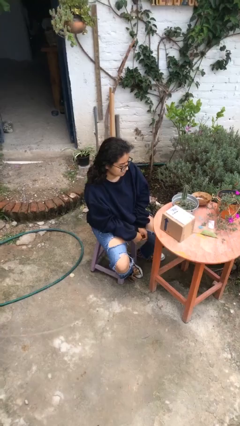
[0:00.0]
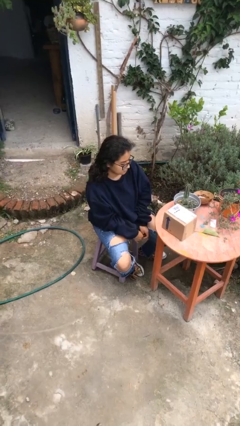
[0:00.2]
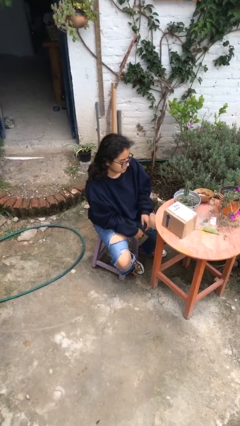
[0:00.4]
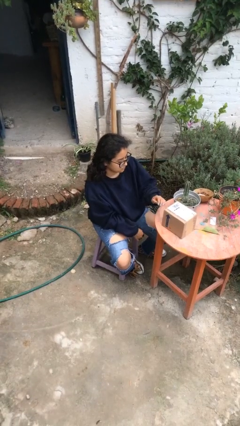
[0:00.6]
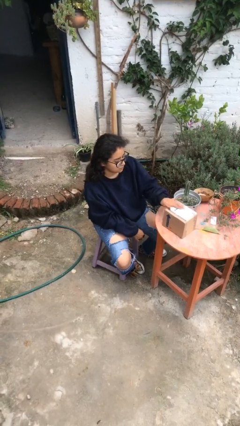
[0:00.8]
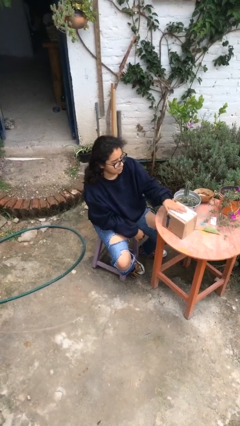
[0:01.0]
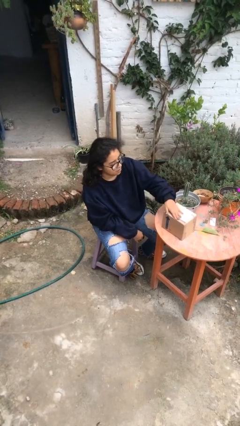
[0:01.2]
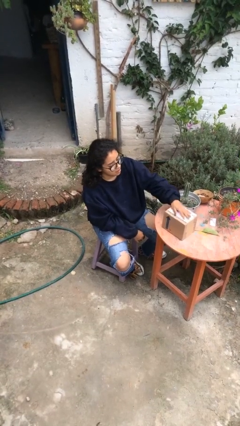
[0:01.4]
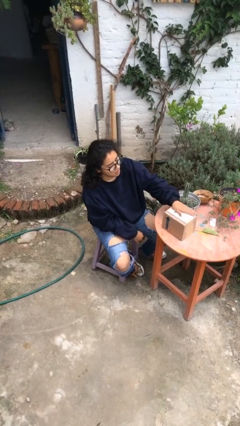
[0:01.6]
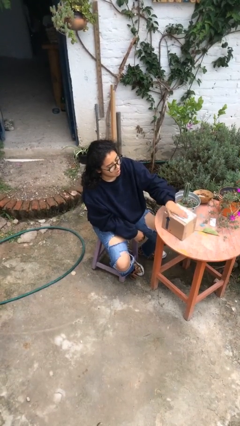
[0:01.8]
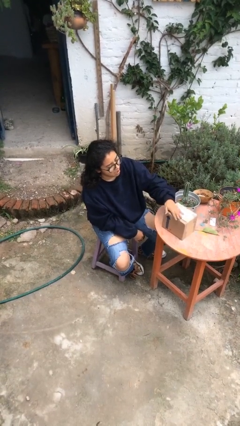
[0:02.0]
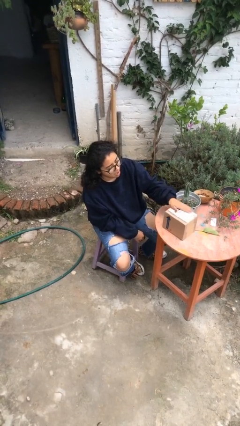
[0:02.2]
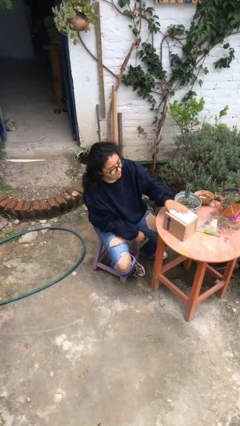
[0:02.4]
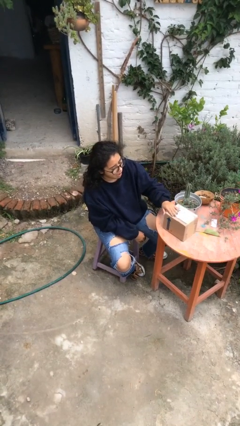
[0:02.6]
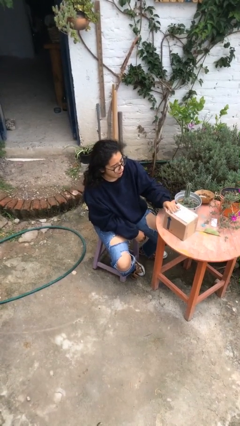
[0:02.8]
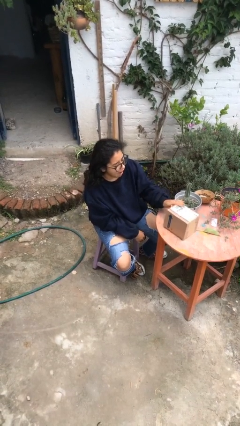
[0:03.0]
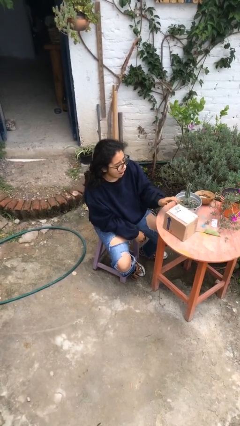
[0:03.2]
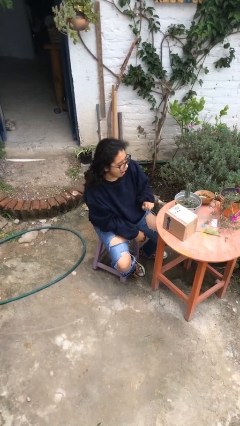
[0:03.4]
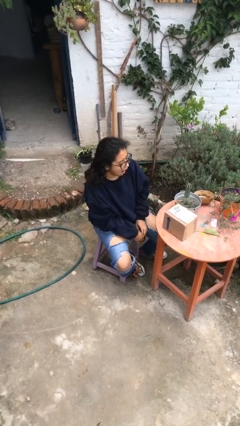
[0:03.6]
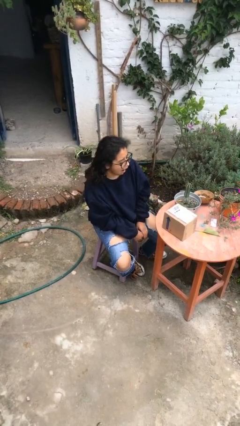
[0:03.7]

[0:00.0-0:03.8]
person waves hand over object

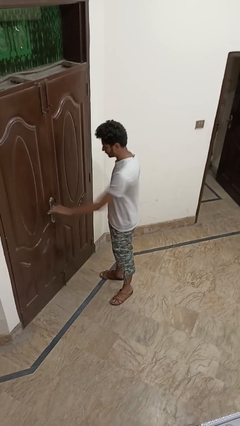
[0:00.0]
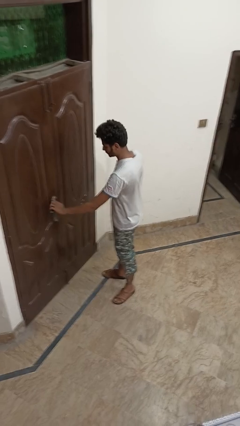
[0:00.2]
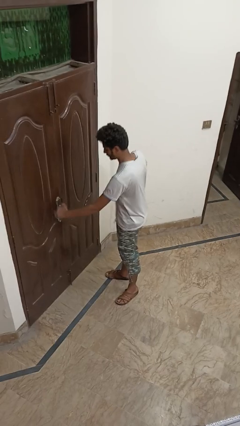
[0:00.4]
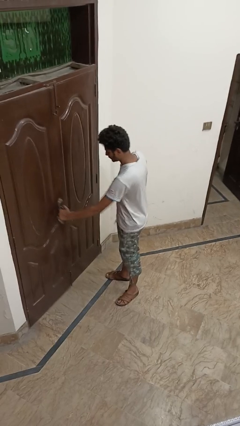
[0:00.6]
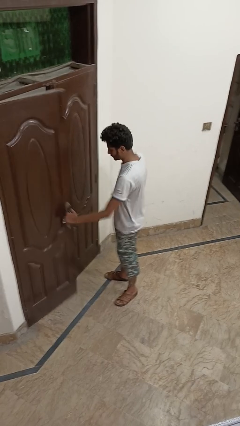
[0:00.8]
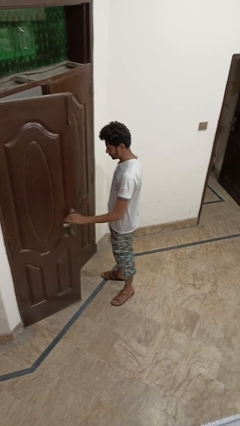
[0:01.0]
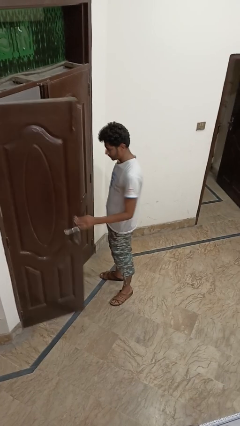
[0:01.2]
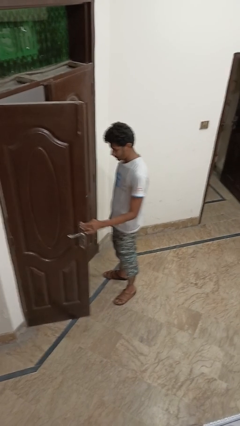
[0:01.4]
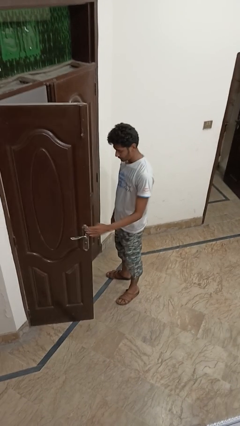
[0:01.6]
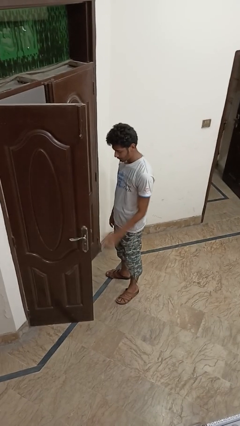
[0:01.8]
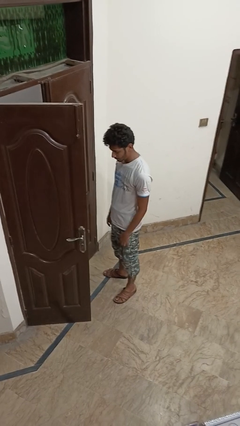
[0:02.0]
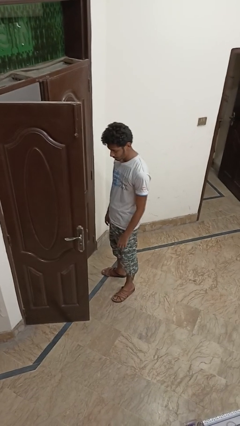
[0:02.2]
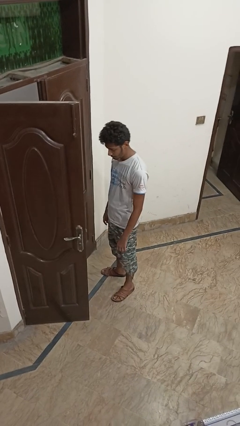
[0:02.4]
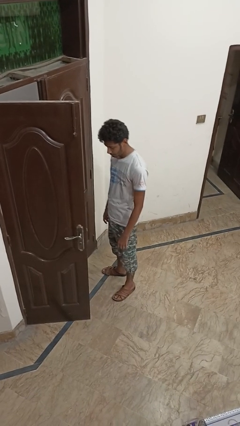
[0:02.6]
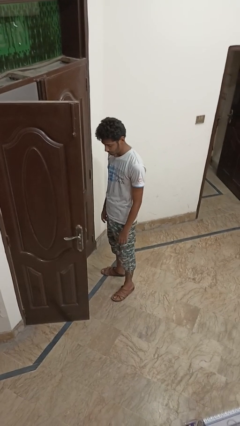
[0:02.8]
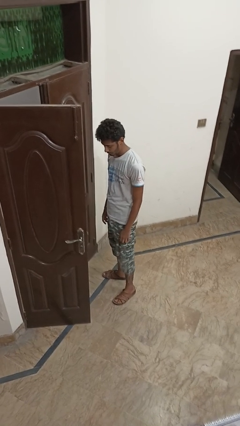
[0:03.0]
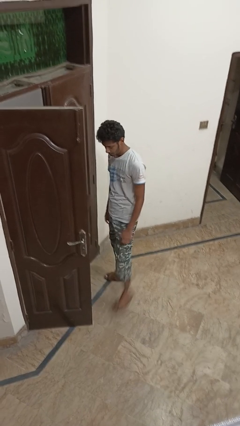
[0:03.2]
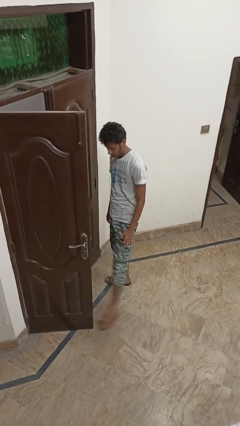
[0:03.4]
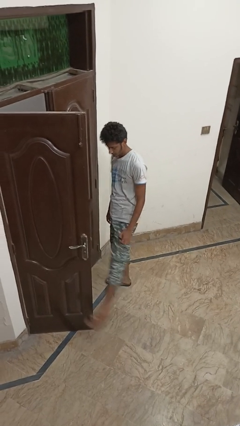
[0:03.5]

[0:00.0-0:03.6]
person opens facility door

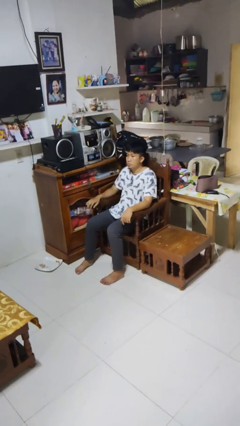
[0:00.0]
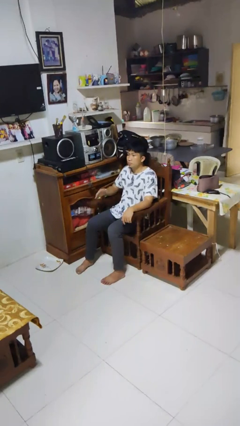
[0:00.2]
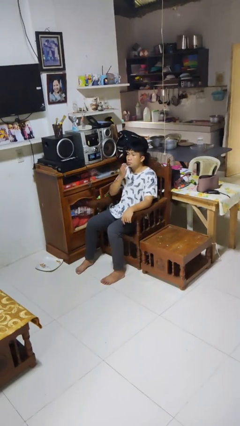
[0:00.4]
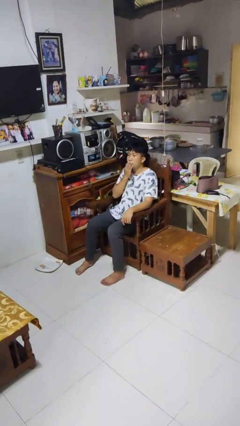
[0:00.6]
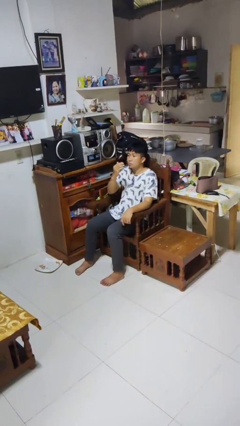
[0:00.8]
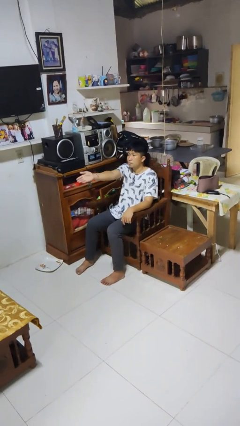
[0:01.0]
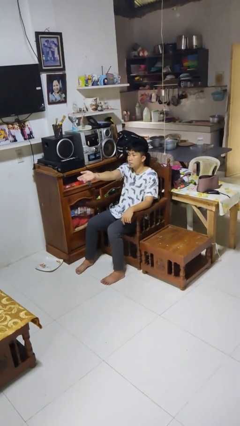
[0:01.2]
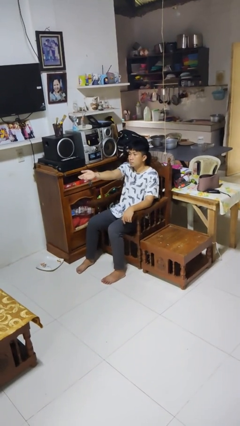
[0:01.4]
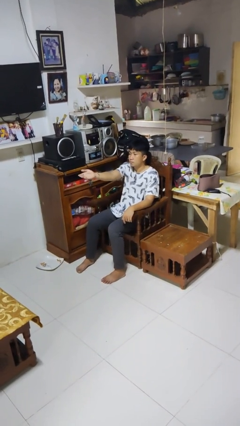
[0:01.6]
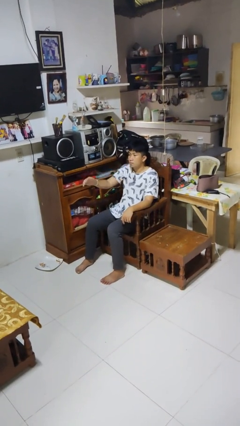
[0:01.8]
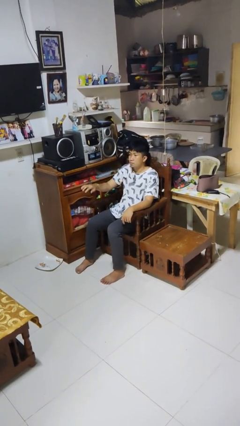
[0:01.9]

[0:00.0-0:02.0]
person gestures blow kiss

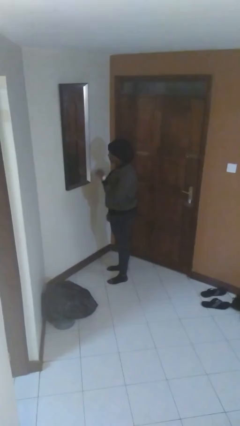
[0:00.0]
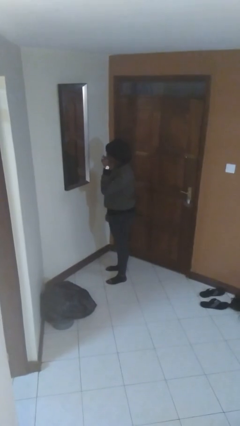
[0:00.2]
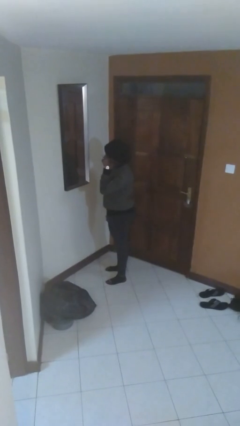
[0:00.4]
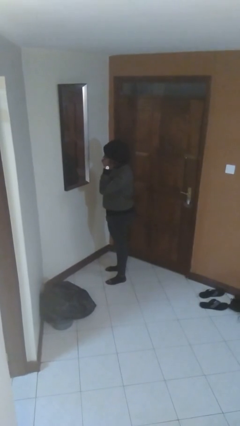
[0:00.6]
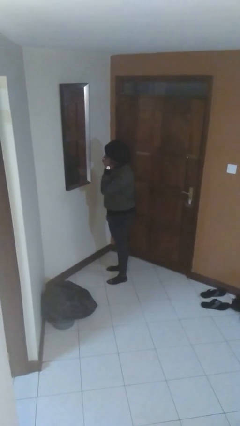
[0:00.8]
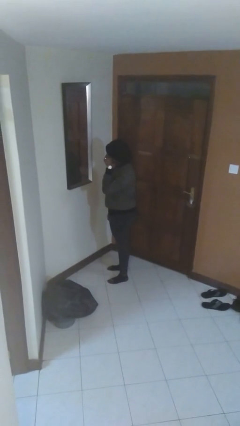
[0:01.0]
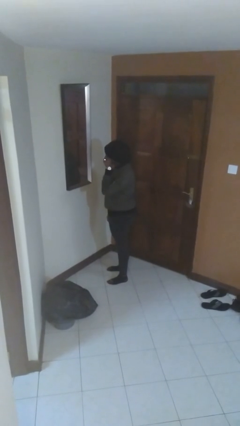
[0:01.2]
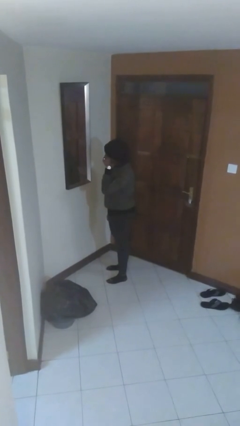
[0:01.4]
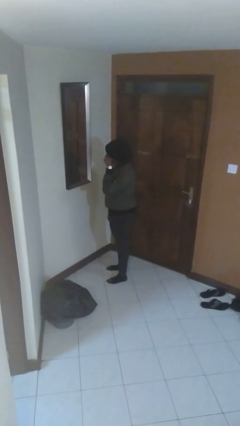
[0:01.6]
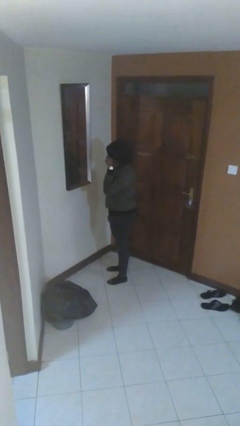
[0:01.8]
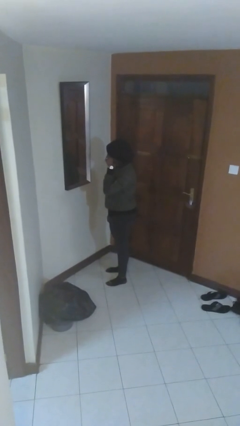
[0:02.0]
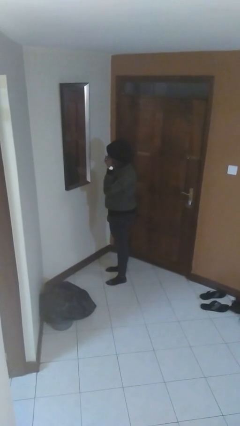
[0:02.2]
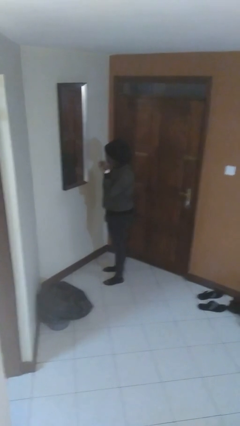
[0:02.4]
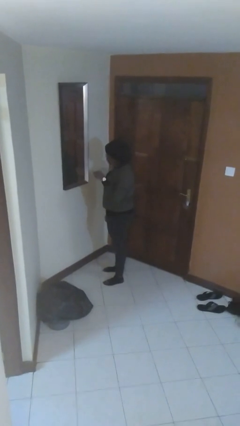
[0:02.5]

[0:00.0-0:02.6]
person applies eye makeup

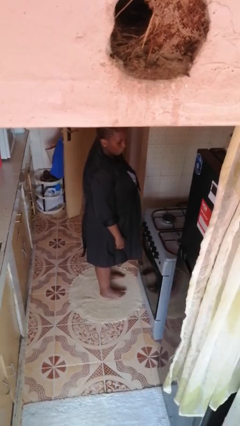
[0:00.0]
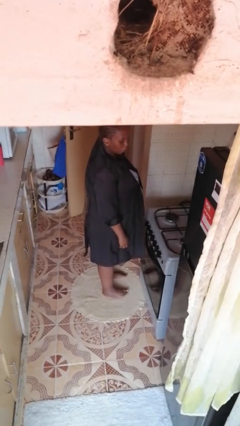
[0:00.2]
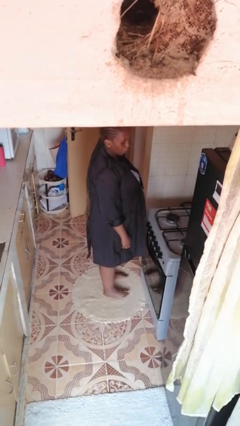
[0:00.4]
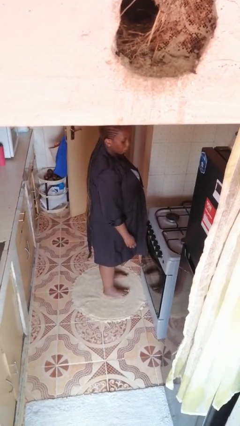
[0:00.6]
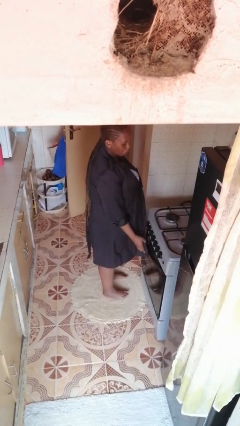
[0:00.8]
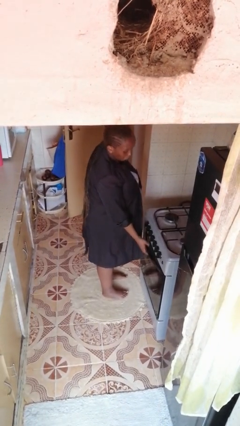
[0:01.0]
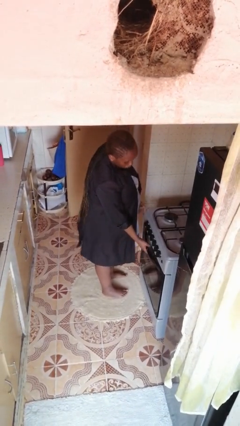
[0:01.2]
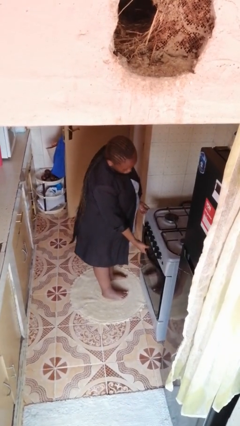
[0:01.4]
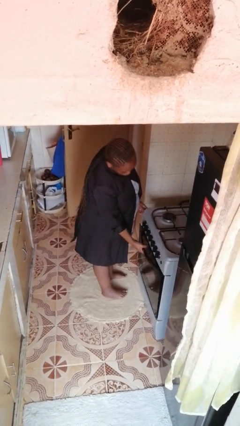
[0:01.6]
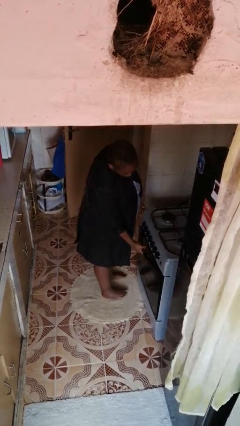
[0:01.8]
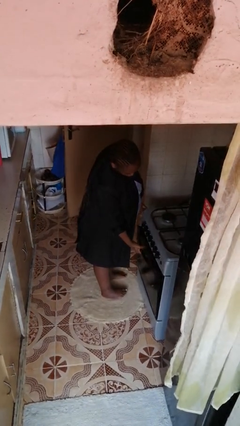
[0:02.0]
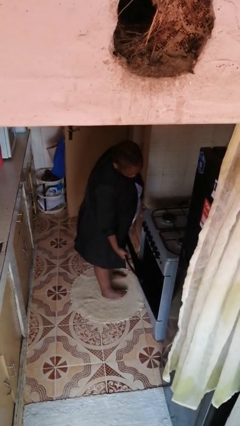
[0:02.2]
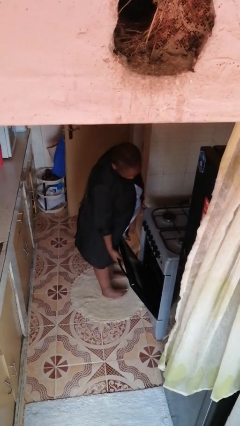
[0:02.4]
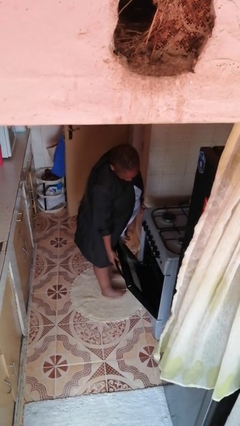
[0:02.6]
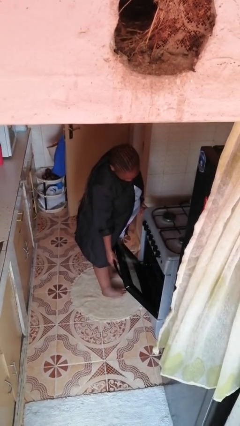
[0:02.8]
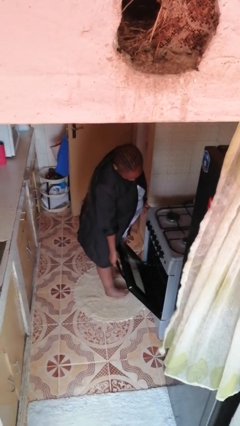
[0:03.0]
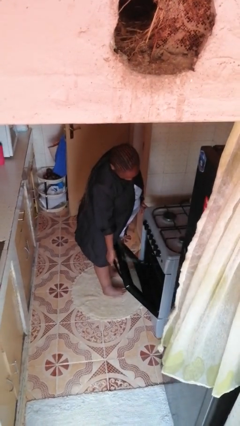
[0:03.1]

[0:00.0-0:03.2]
person opens oven door

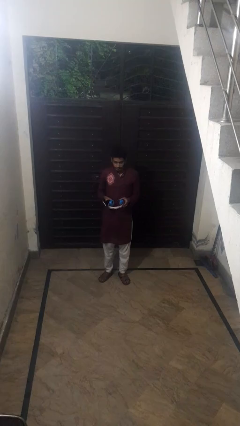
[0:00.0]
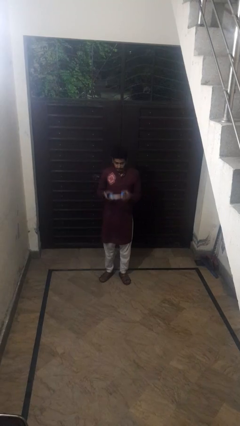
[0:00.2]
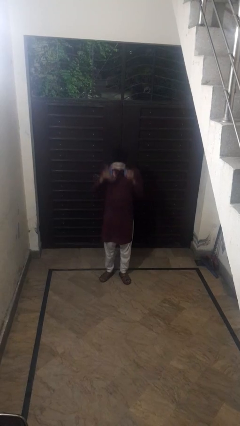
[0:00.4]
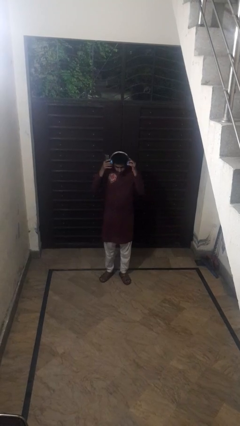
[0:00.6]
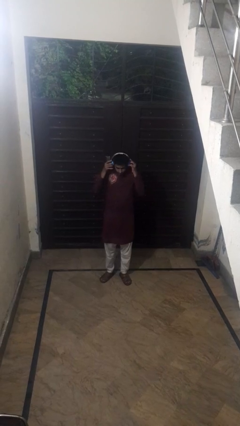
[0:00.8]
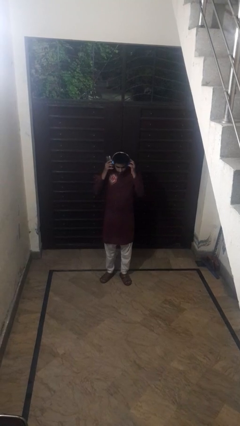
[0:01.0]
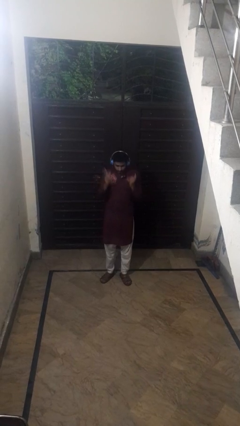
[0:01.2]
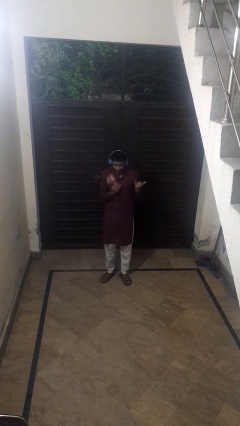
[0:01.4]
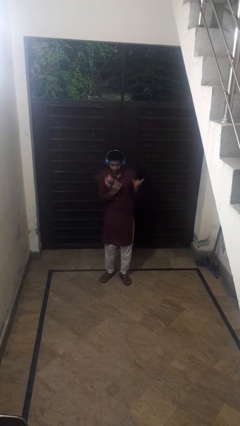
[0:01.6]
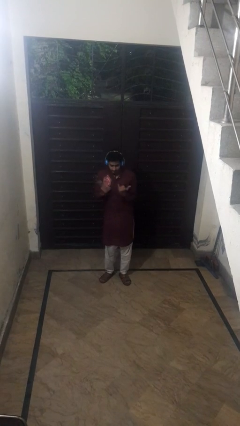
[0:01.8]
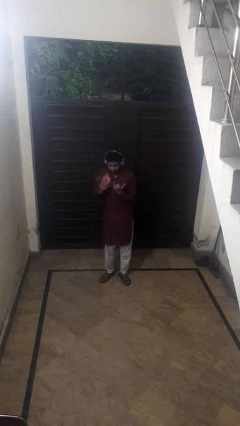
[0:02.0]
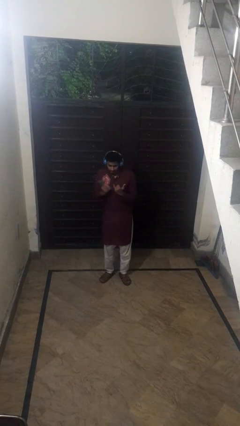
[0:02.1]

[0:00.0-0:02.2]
person puts on headphones
